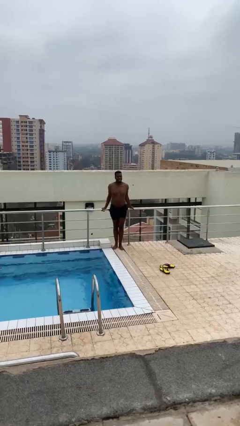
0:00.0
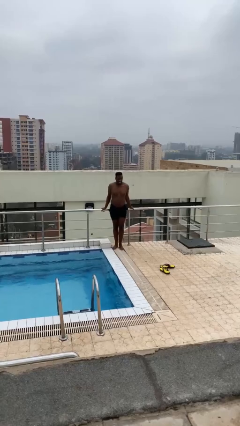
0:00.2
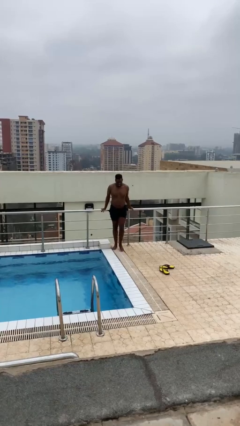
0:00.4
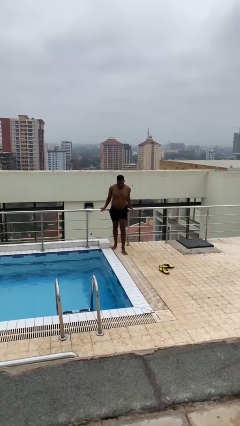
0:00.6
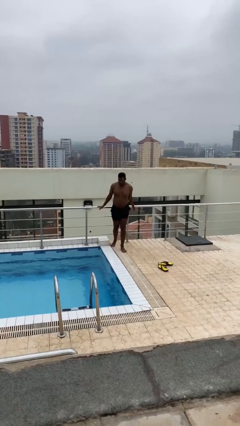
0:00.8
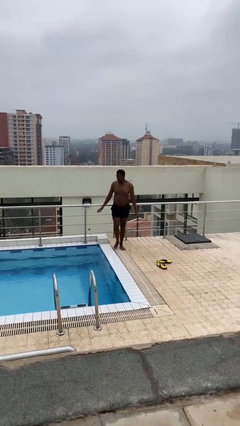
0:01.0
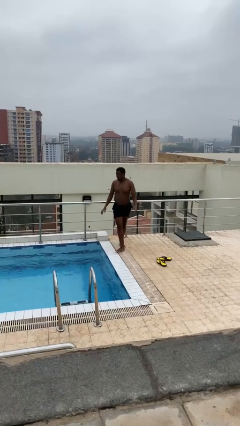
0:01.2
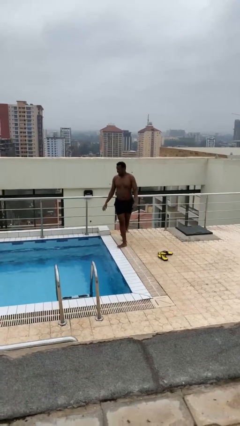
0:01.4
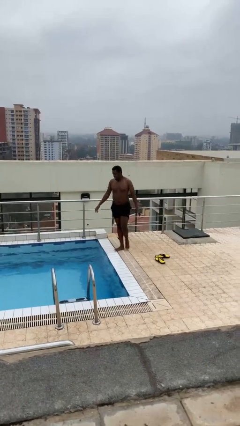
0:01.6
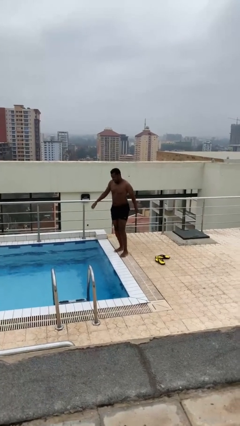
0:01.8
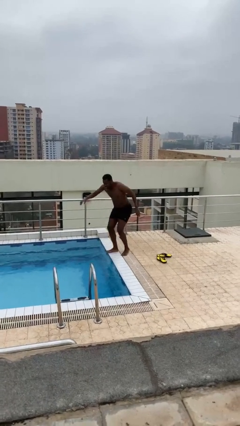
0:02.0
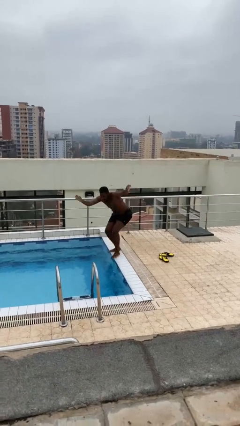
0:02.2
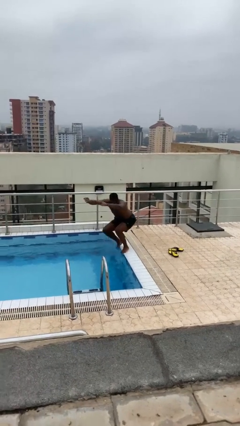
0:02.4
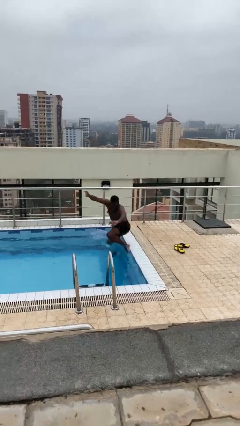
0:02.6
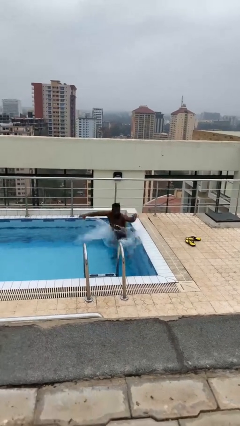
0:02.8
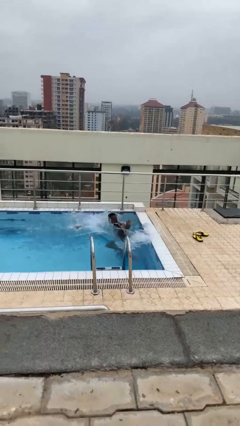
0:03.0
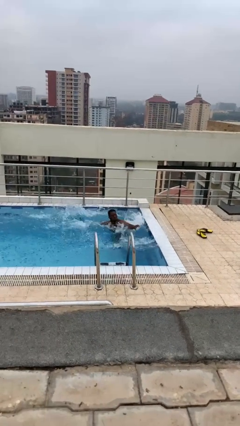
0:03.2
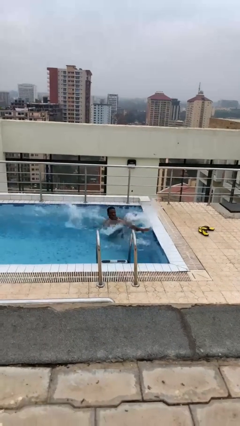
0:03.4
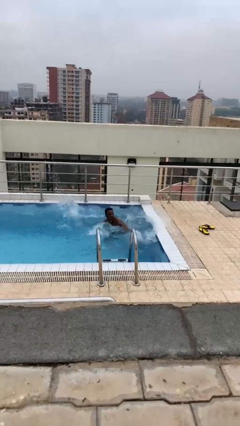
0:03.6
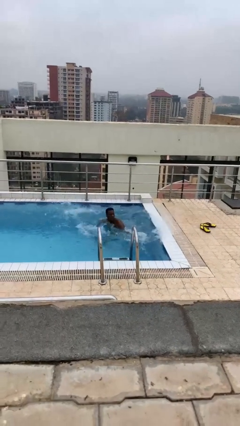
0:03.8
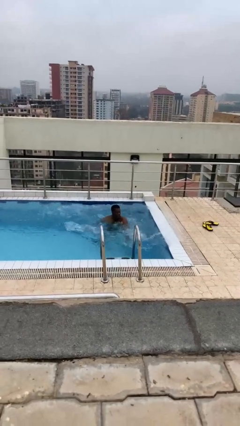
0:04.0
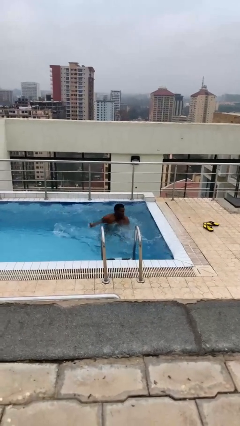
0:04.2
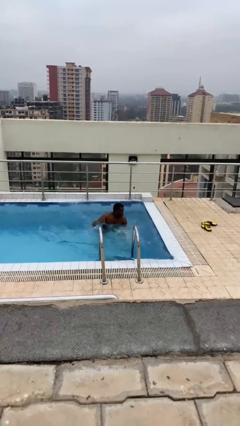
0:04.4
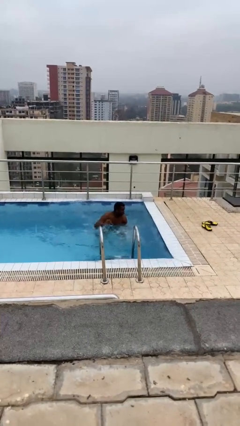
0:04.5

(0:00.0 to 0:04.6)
person falls into pool

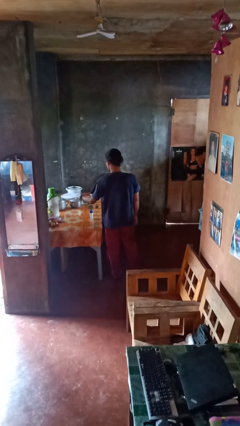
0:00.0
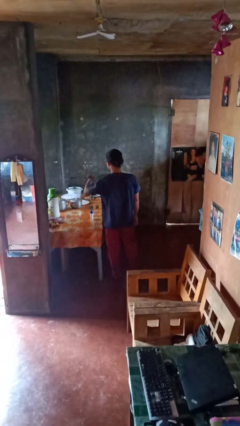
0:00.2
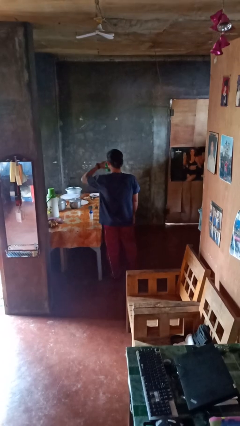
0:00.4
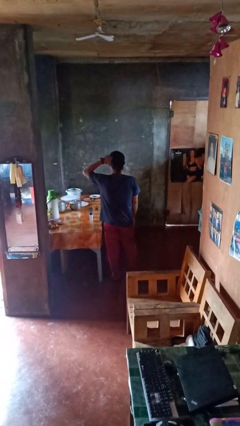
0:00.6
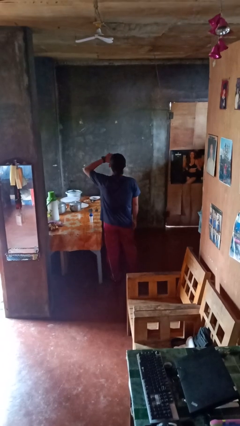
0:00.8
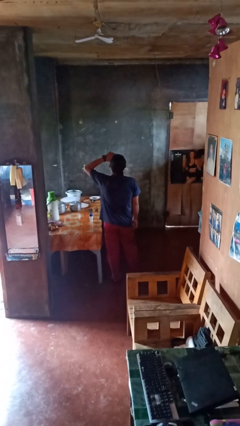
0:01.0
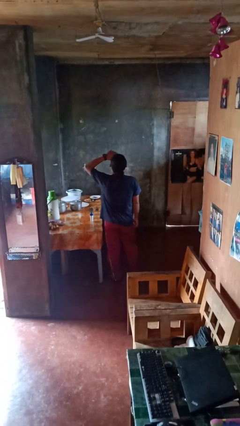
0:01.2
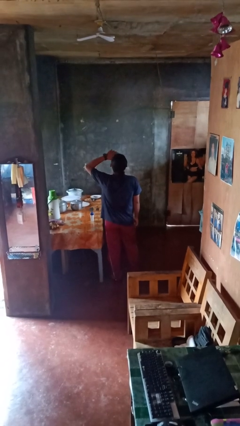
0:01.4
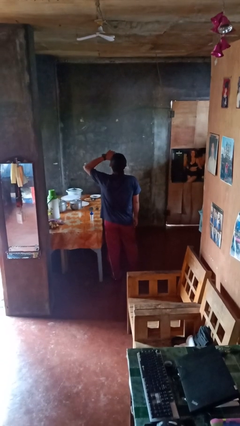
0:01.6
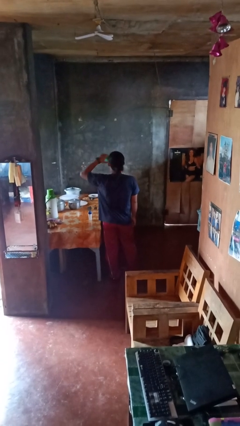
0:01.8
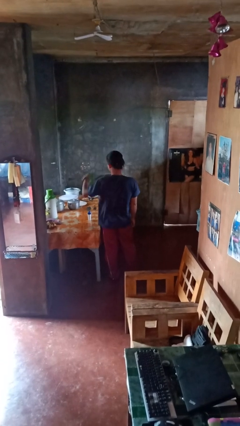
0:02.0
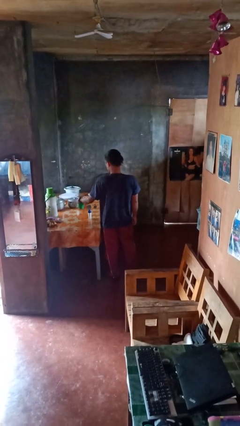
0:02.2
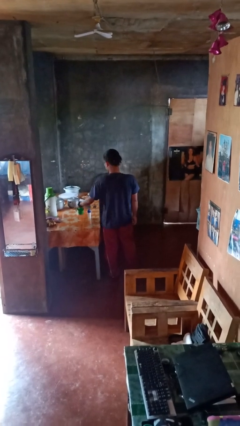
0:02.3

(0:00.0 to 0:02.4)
person drinks from cup

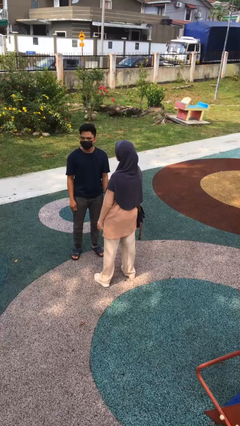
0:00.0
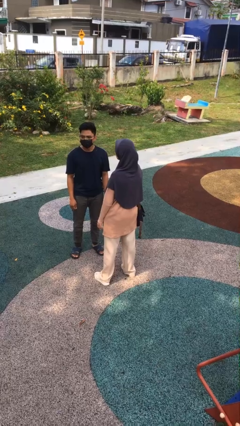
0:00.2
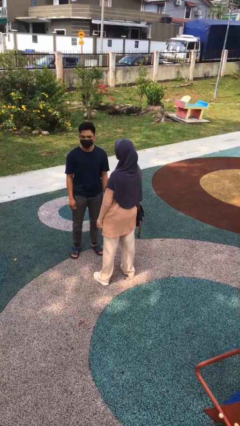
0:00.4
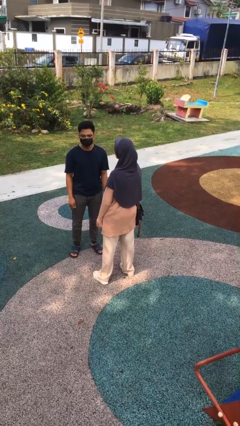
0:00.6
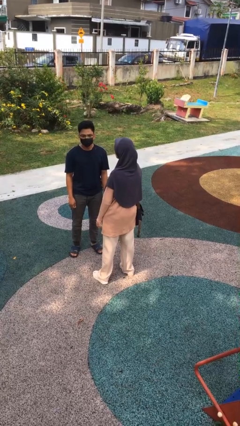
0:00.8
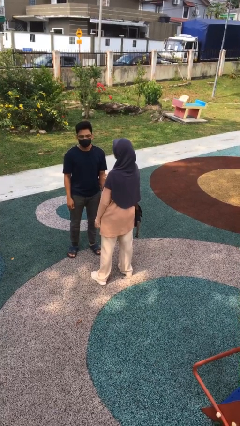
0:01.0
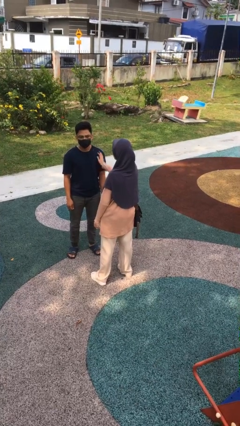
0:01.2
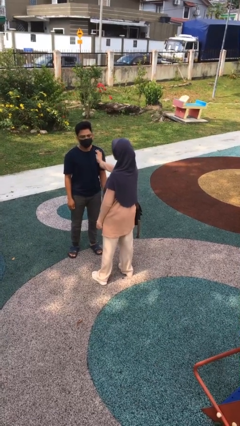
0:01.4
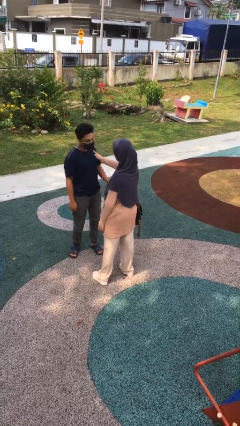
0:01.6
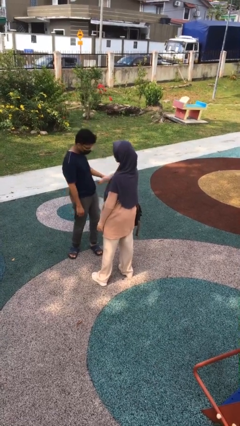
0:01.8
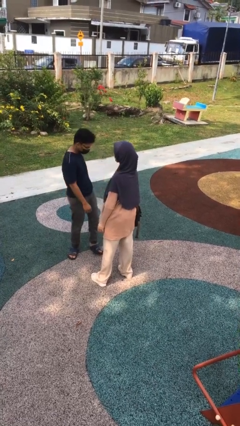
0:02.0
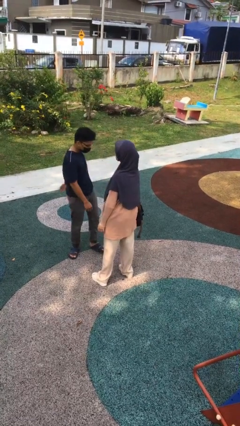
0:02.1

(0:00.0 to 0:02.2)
person shoves person

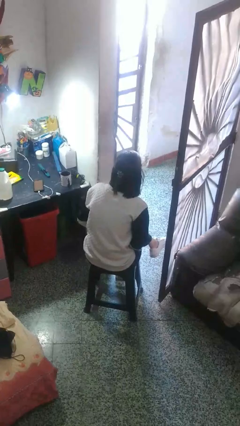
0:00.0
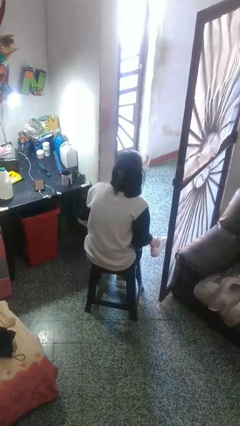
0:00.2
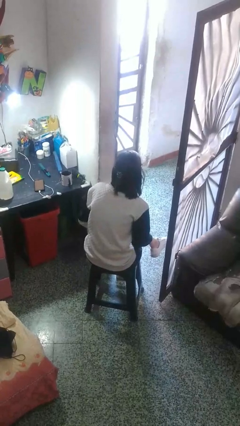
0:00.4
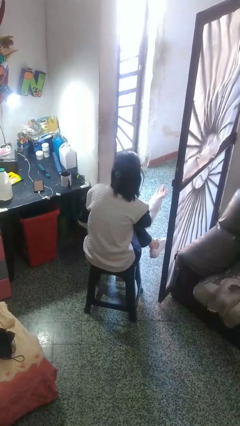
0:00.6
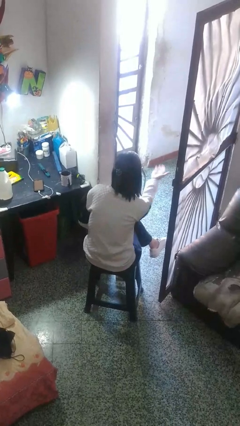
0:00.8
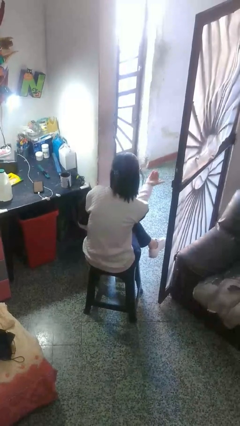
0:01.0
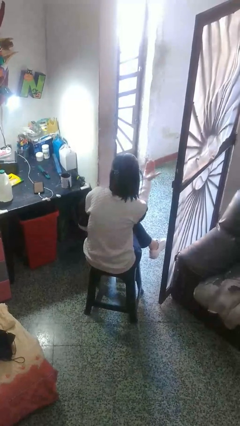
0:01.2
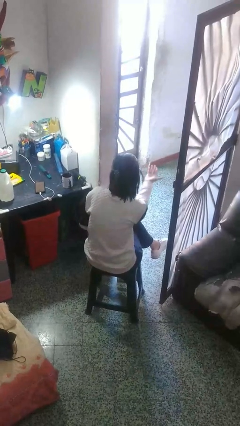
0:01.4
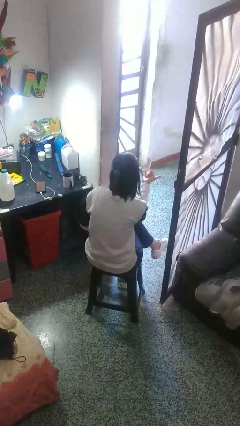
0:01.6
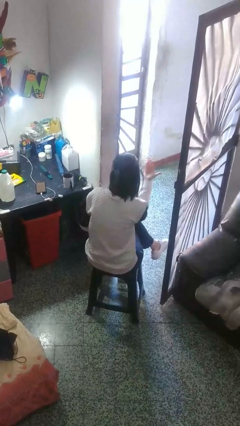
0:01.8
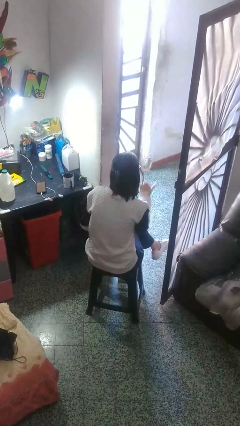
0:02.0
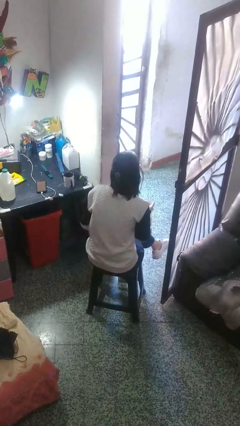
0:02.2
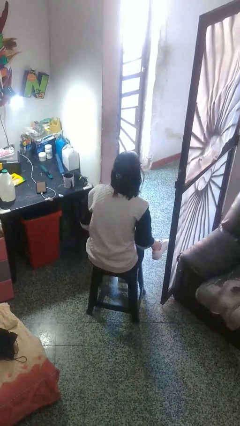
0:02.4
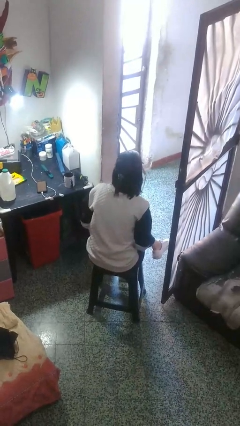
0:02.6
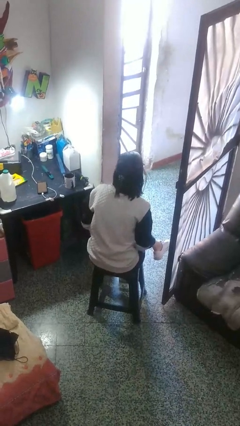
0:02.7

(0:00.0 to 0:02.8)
person gestures come here

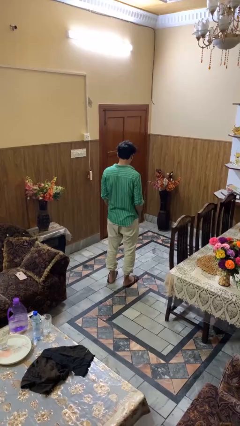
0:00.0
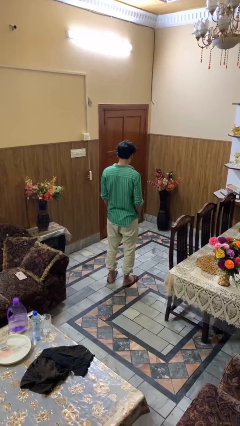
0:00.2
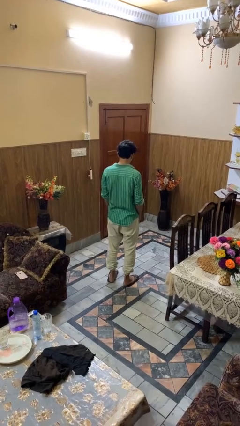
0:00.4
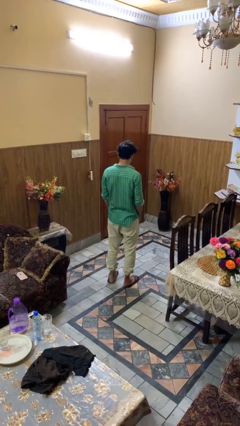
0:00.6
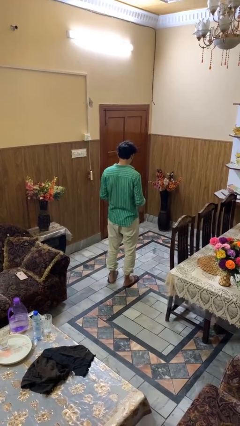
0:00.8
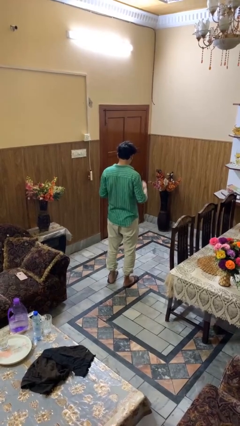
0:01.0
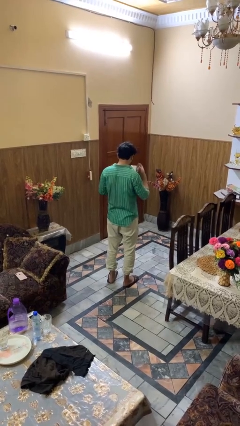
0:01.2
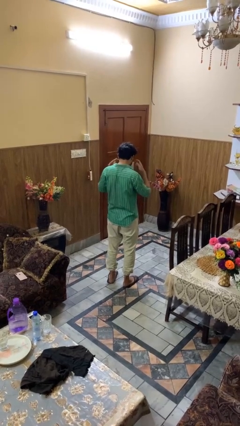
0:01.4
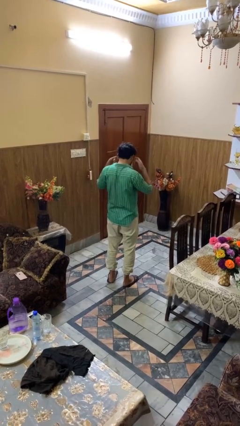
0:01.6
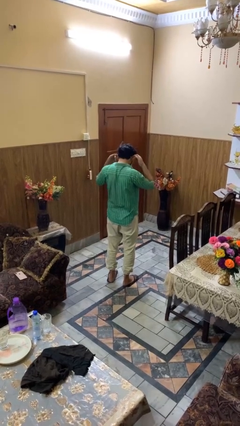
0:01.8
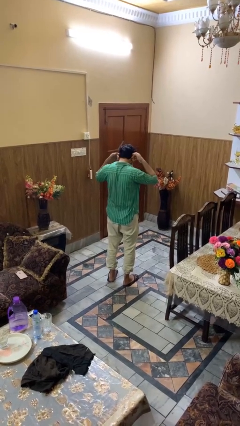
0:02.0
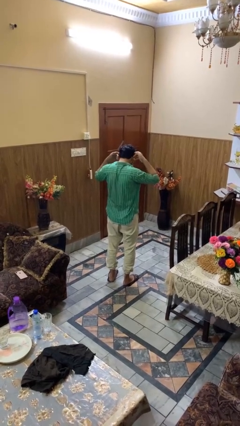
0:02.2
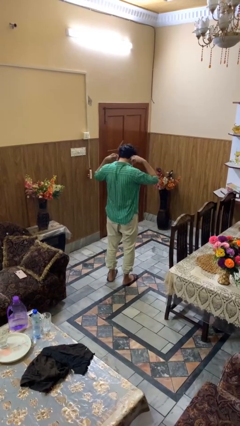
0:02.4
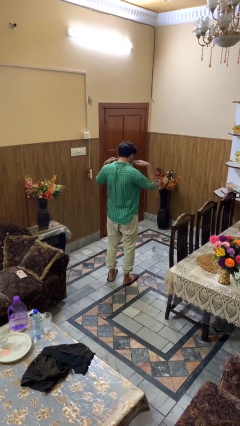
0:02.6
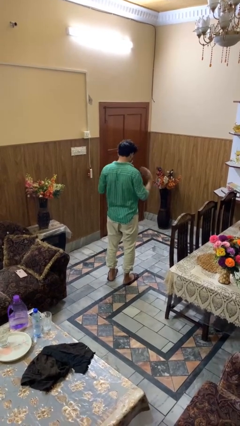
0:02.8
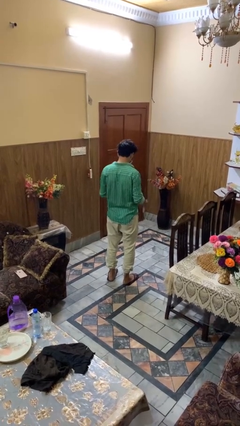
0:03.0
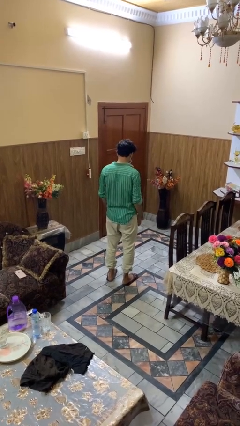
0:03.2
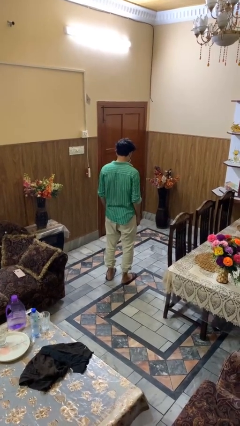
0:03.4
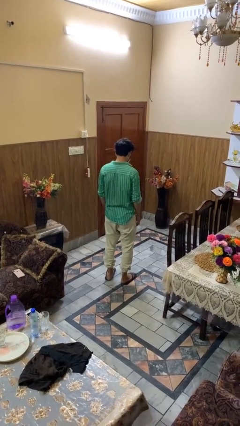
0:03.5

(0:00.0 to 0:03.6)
person puts on facemask

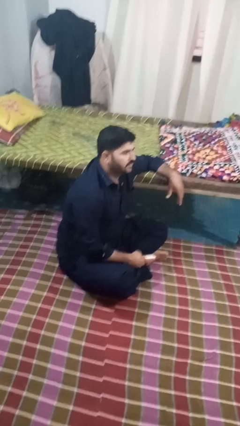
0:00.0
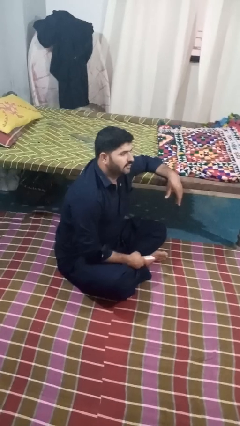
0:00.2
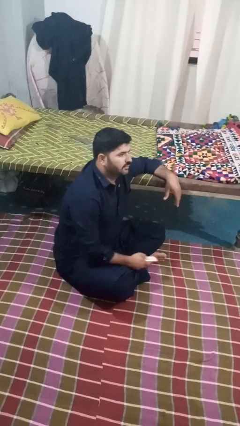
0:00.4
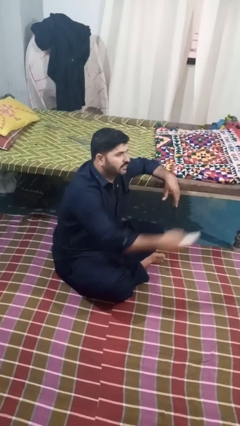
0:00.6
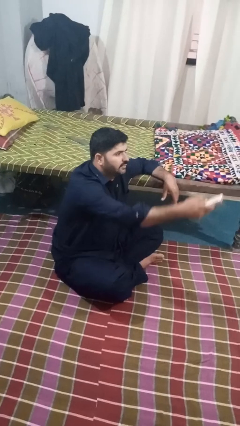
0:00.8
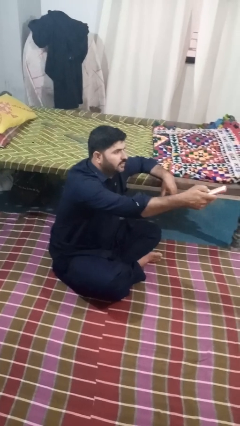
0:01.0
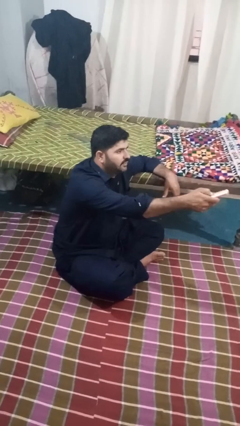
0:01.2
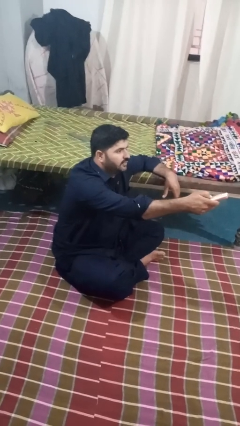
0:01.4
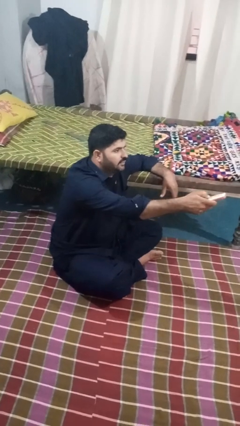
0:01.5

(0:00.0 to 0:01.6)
person uses television remote

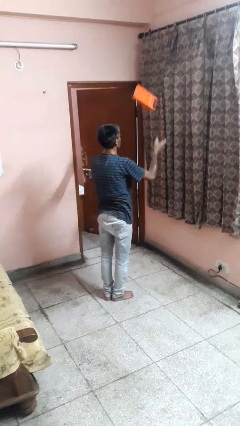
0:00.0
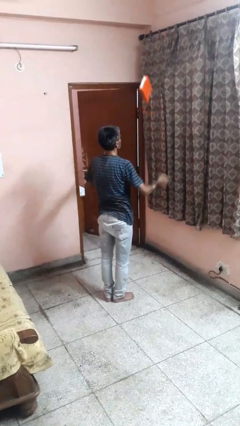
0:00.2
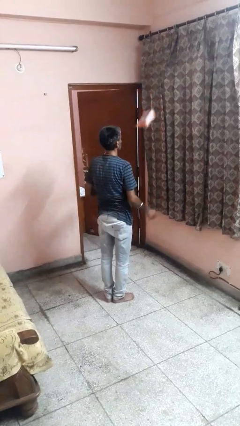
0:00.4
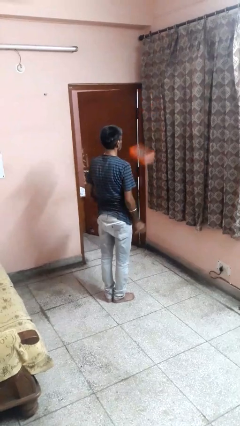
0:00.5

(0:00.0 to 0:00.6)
person throws object into air
